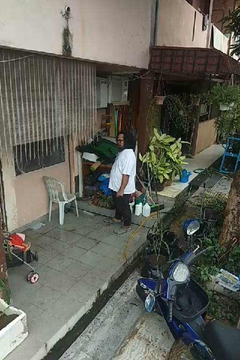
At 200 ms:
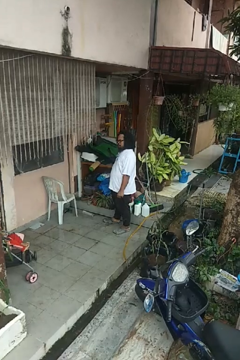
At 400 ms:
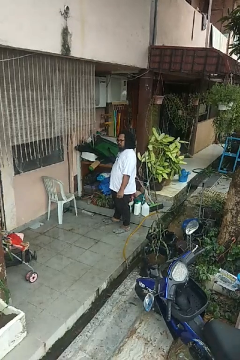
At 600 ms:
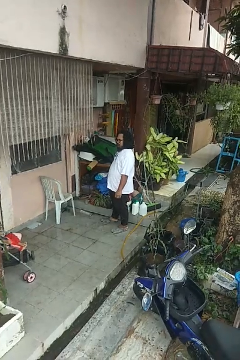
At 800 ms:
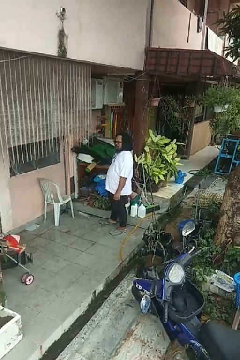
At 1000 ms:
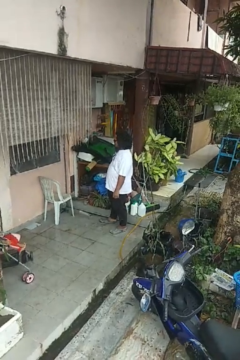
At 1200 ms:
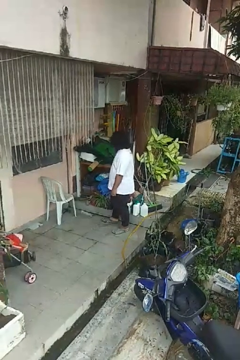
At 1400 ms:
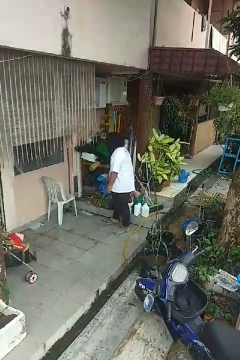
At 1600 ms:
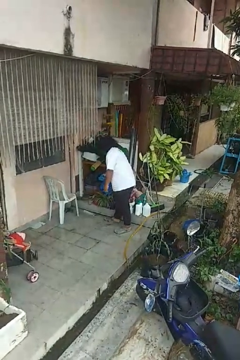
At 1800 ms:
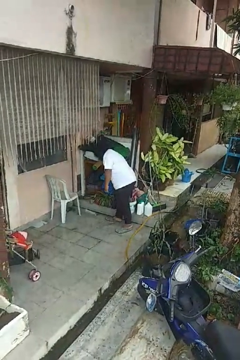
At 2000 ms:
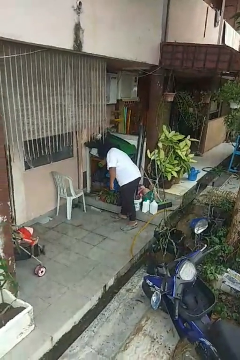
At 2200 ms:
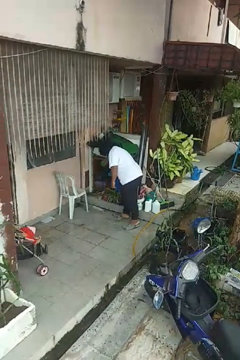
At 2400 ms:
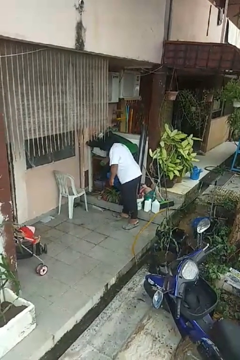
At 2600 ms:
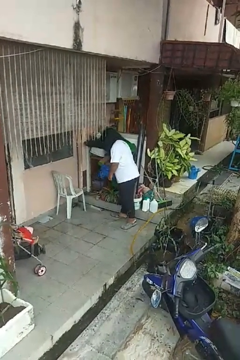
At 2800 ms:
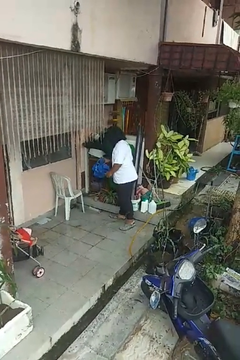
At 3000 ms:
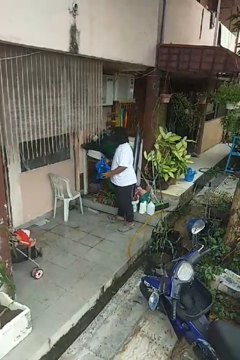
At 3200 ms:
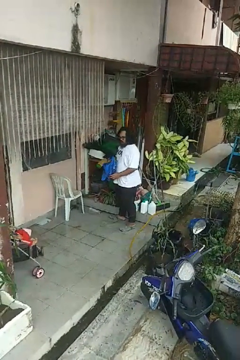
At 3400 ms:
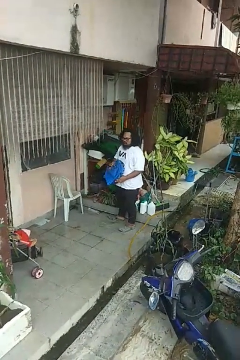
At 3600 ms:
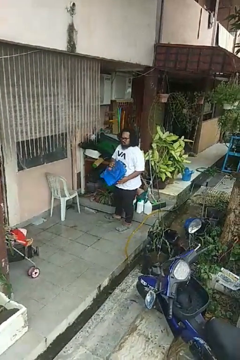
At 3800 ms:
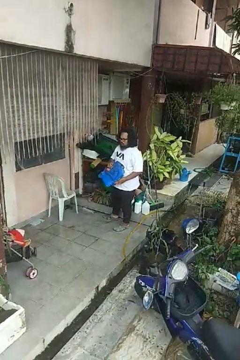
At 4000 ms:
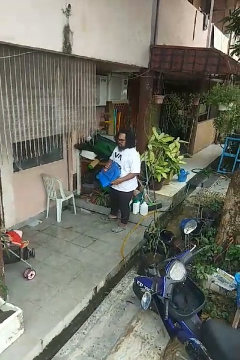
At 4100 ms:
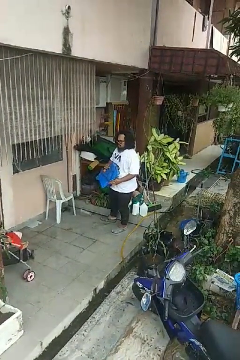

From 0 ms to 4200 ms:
person picks up object from cabinet

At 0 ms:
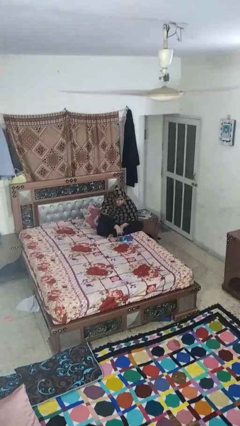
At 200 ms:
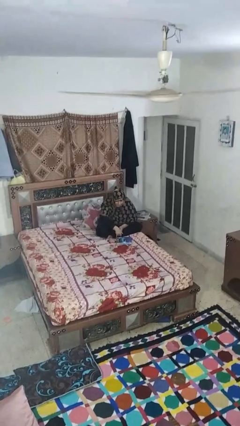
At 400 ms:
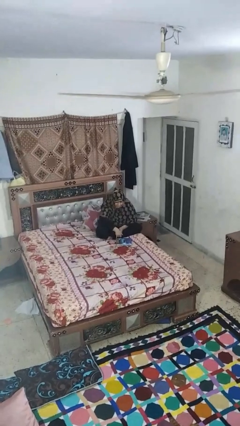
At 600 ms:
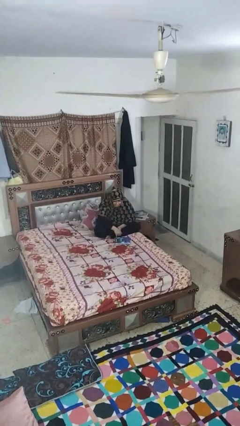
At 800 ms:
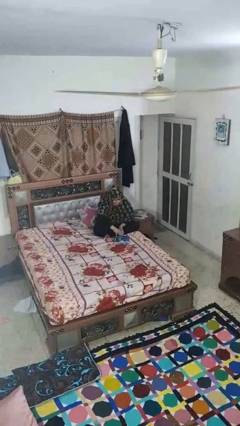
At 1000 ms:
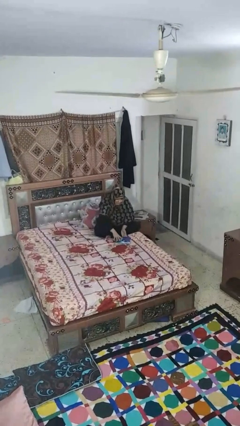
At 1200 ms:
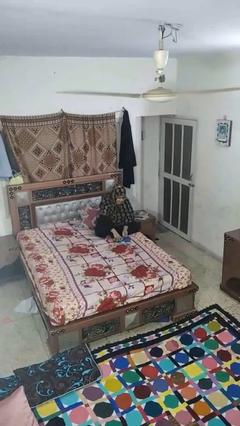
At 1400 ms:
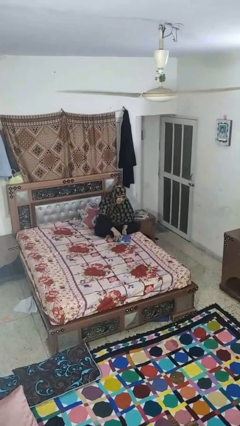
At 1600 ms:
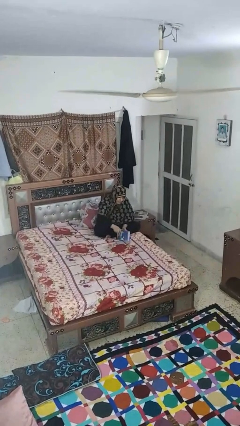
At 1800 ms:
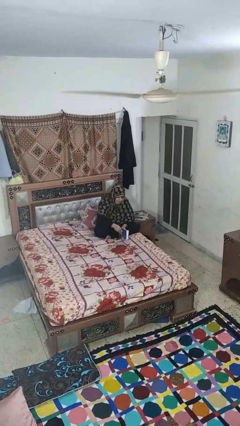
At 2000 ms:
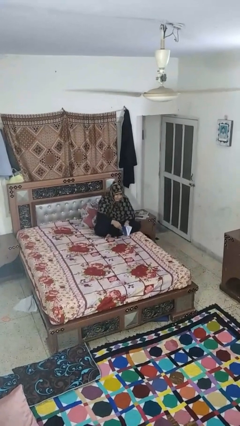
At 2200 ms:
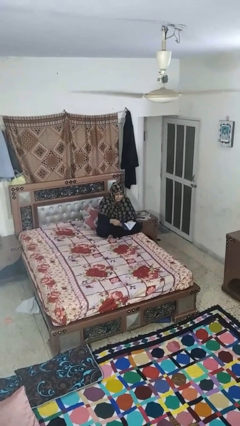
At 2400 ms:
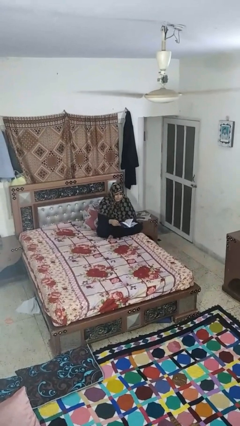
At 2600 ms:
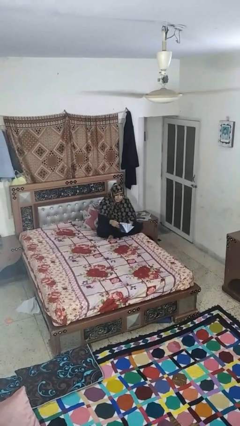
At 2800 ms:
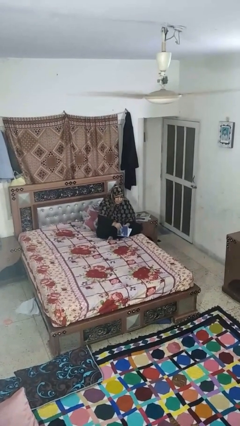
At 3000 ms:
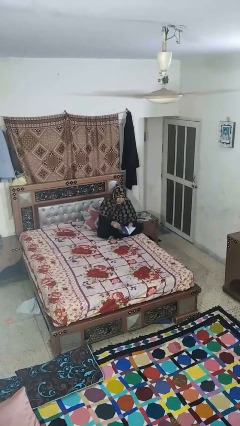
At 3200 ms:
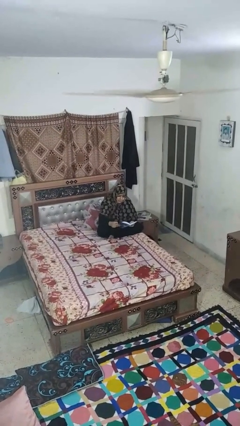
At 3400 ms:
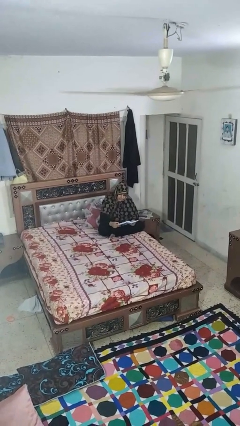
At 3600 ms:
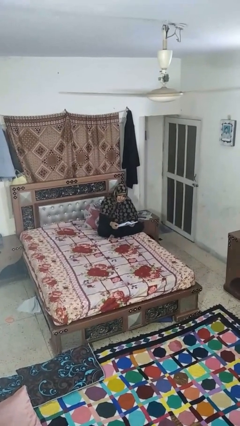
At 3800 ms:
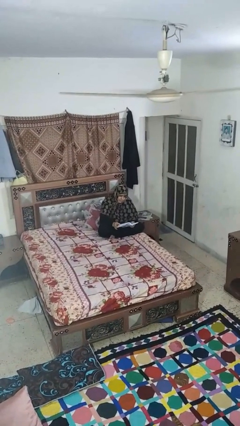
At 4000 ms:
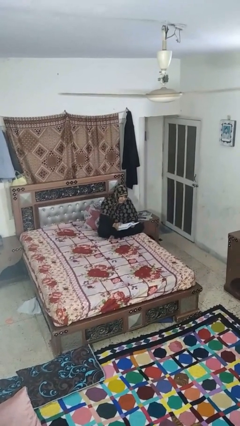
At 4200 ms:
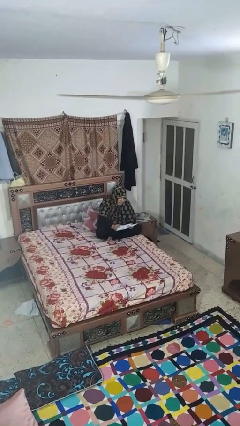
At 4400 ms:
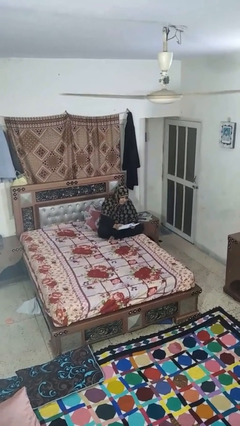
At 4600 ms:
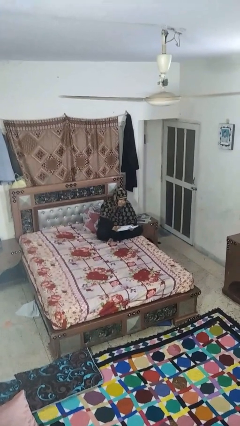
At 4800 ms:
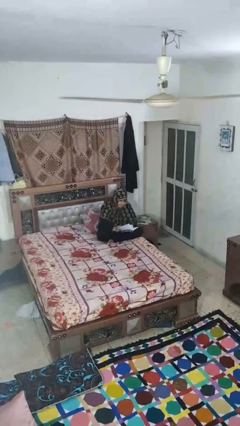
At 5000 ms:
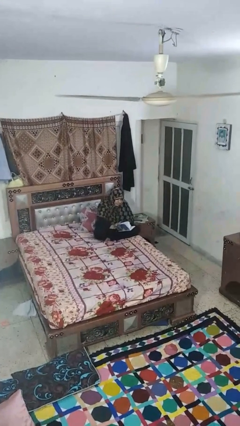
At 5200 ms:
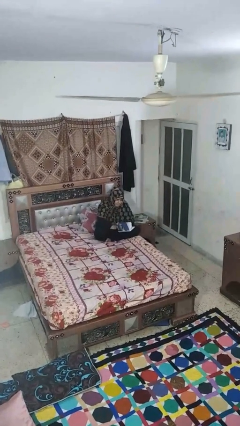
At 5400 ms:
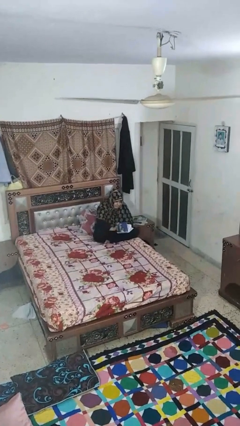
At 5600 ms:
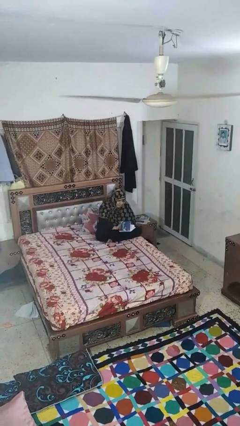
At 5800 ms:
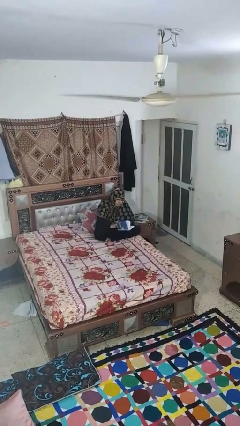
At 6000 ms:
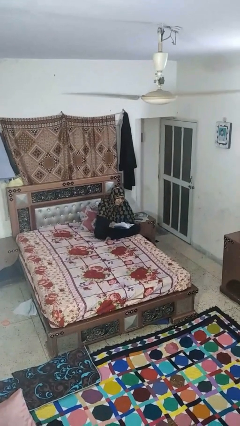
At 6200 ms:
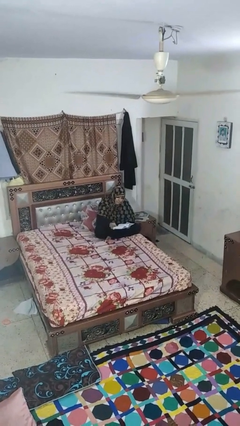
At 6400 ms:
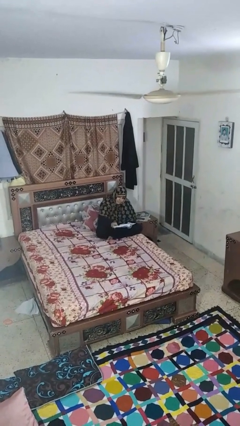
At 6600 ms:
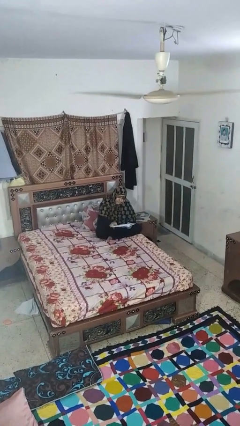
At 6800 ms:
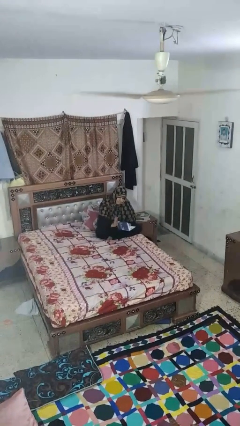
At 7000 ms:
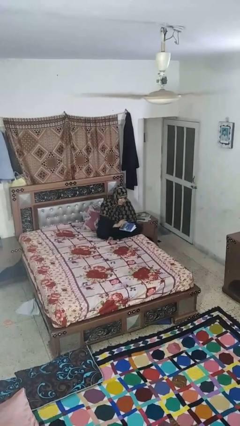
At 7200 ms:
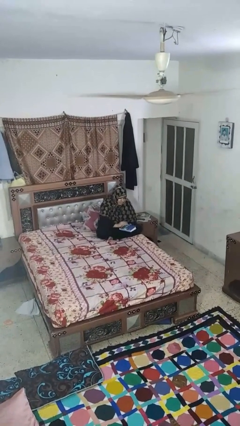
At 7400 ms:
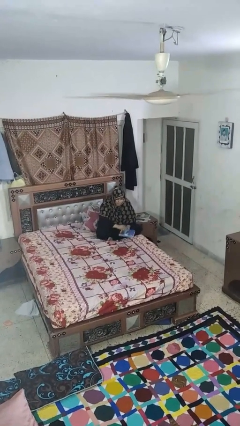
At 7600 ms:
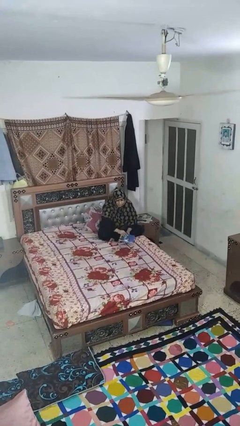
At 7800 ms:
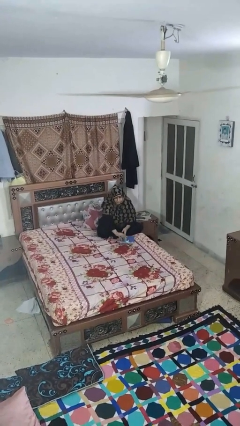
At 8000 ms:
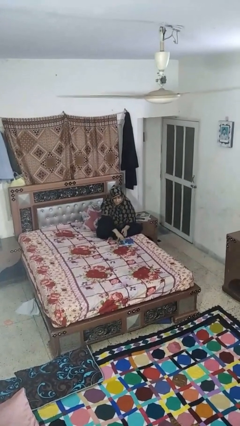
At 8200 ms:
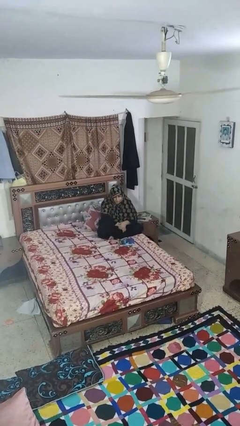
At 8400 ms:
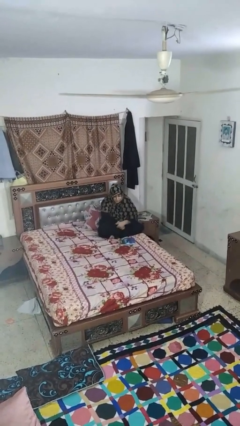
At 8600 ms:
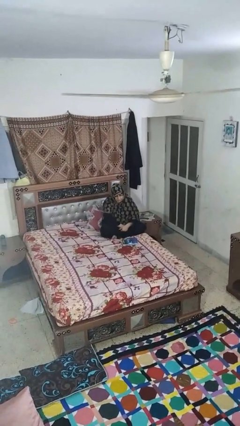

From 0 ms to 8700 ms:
person reads book

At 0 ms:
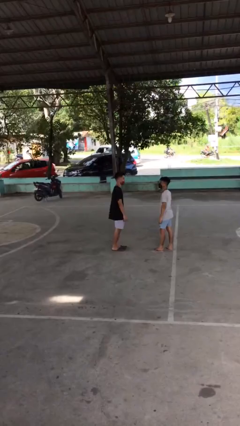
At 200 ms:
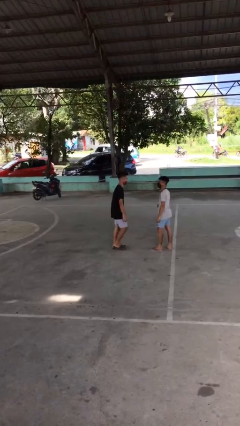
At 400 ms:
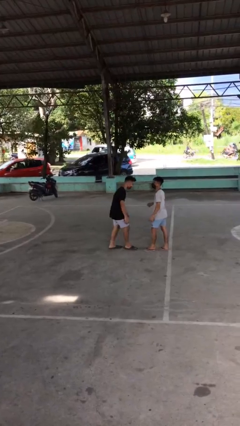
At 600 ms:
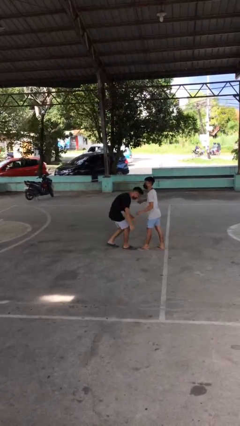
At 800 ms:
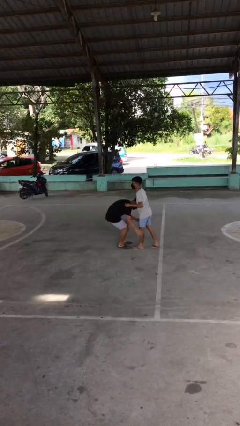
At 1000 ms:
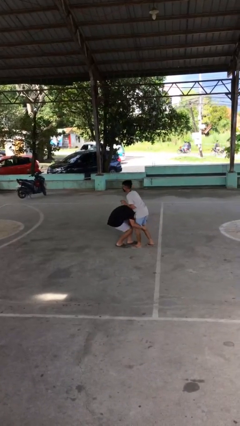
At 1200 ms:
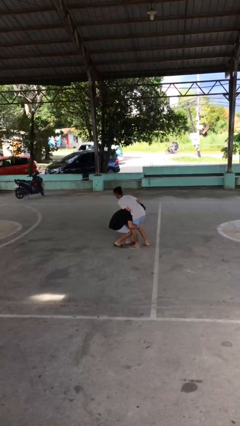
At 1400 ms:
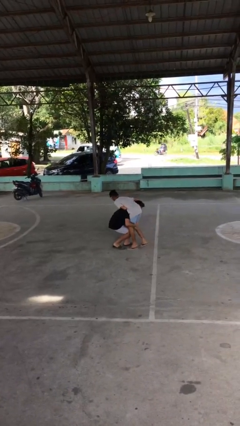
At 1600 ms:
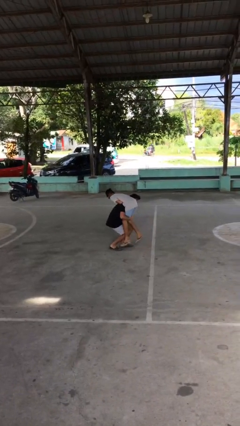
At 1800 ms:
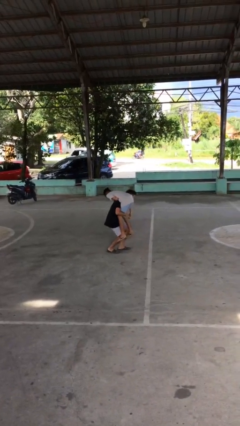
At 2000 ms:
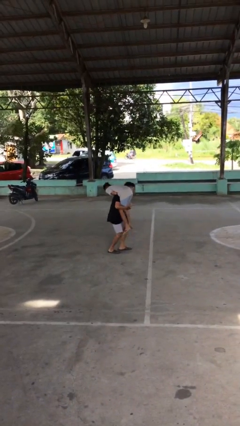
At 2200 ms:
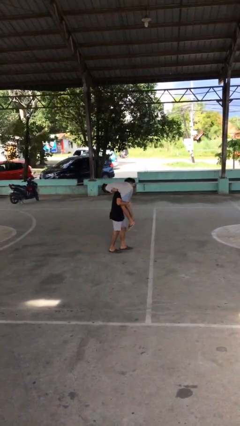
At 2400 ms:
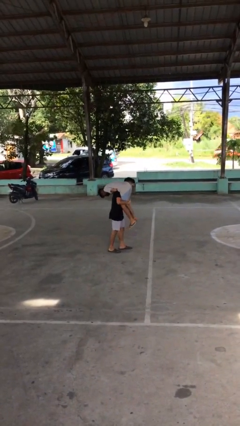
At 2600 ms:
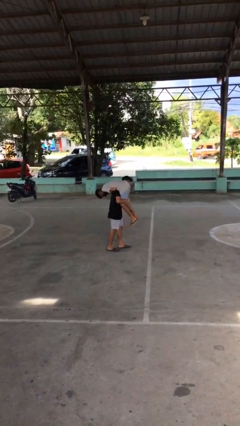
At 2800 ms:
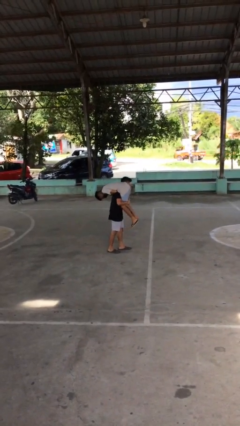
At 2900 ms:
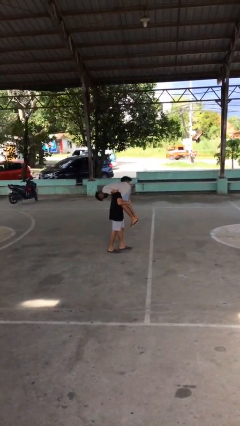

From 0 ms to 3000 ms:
person carries person over shoulder

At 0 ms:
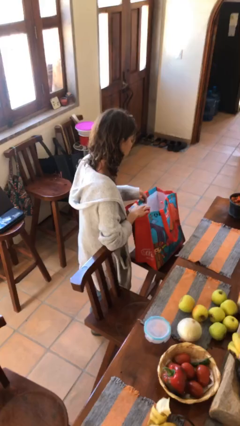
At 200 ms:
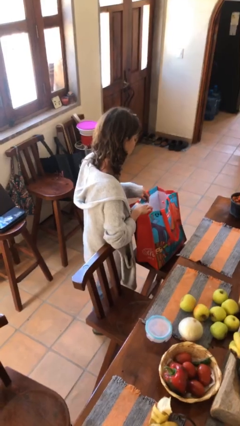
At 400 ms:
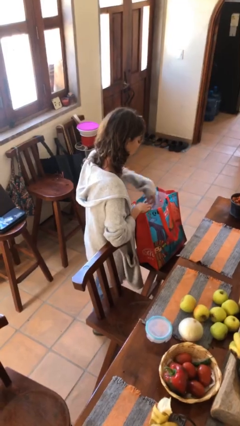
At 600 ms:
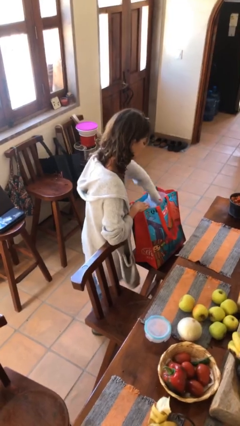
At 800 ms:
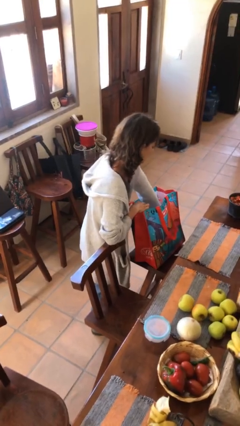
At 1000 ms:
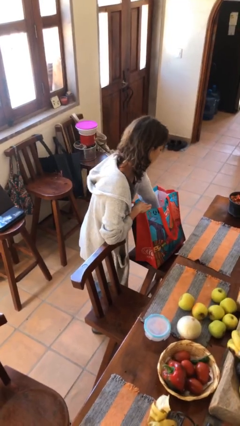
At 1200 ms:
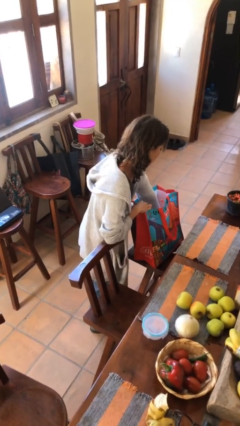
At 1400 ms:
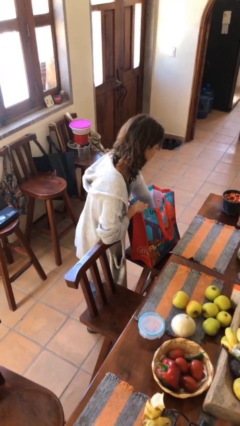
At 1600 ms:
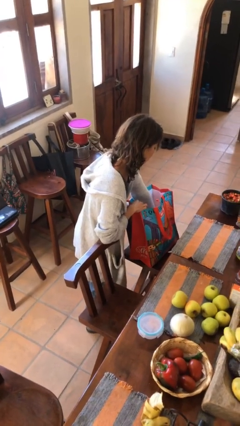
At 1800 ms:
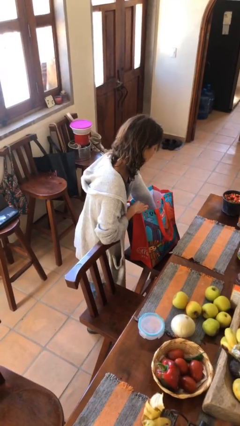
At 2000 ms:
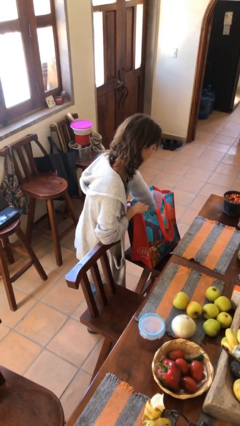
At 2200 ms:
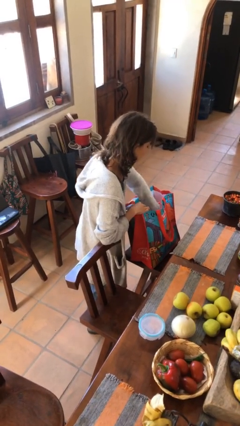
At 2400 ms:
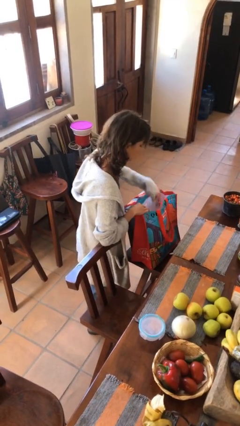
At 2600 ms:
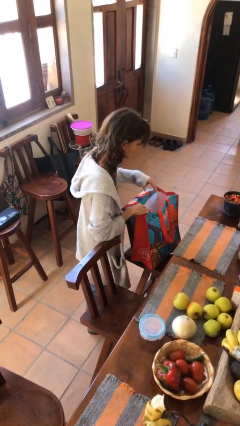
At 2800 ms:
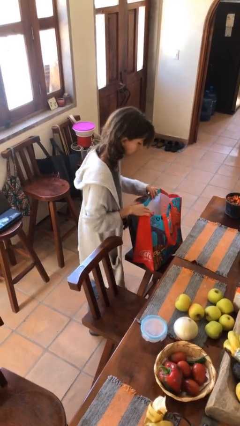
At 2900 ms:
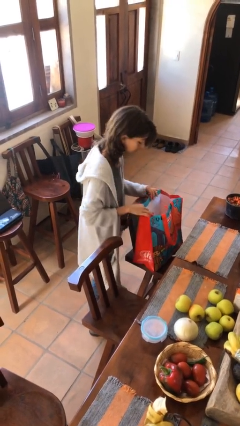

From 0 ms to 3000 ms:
person searches in bag
